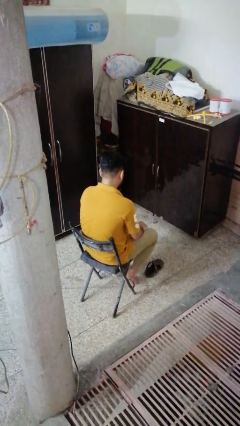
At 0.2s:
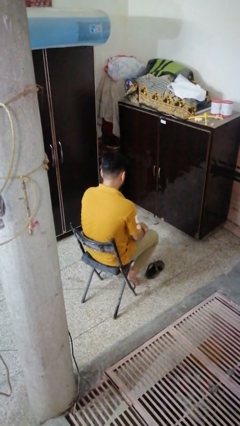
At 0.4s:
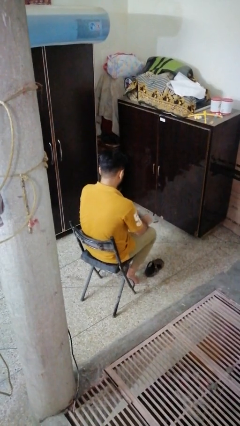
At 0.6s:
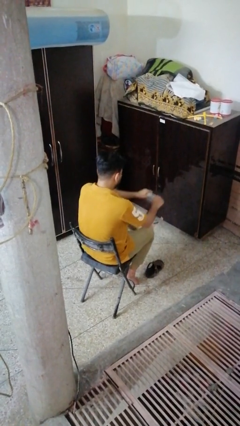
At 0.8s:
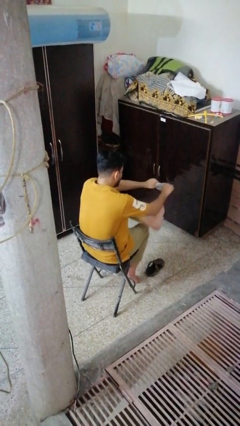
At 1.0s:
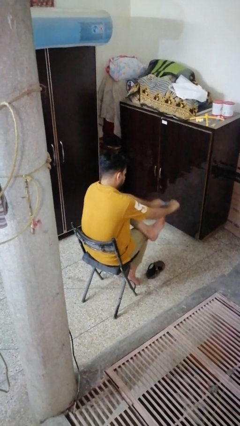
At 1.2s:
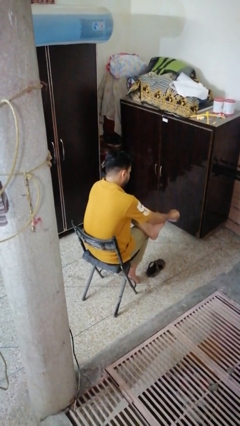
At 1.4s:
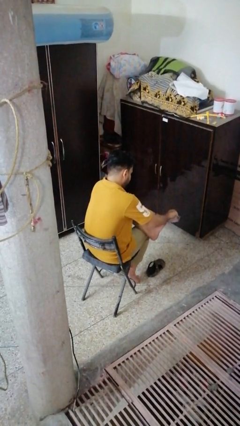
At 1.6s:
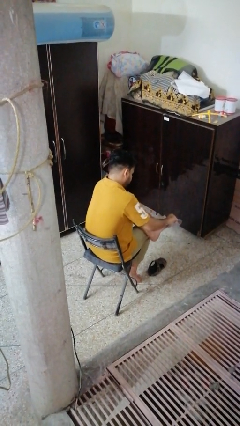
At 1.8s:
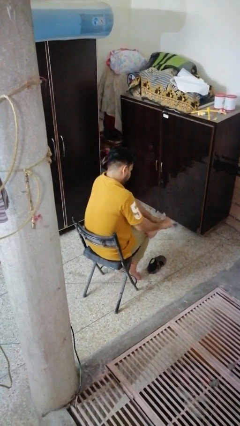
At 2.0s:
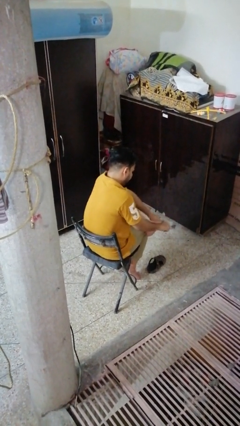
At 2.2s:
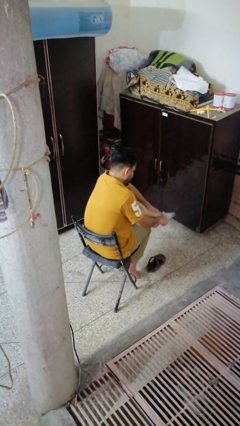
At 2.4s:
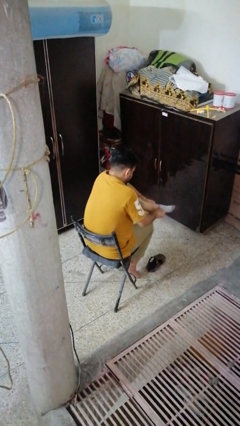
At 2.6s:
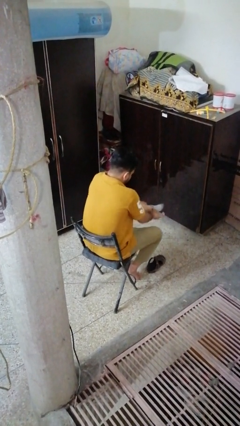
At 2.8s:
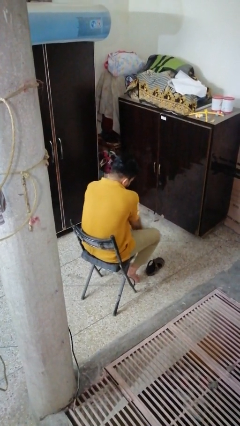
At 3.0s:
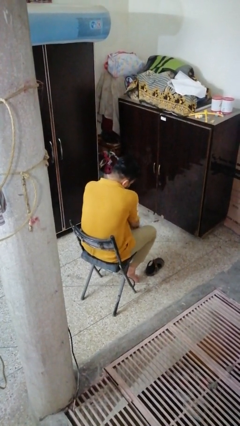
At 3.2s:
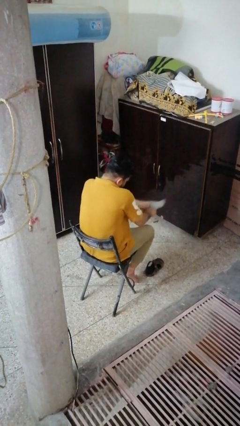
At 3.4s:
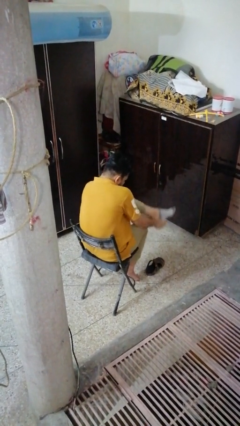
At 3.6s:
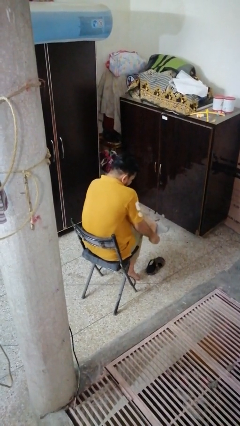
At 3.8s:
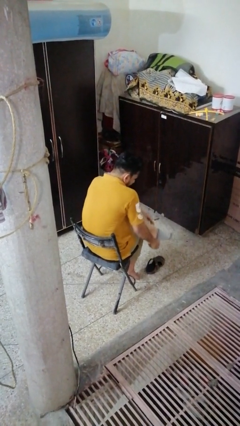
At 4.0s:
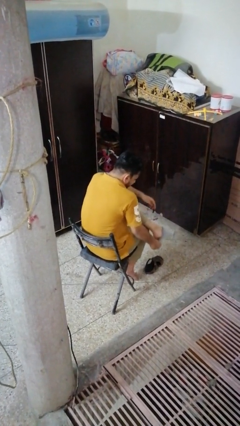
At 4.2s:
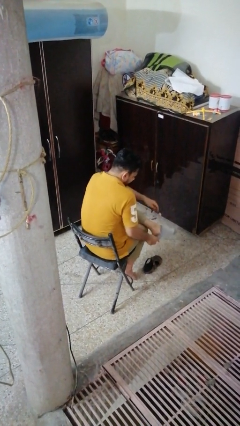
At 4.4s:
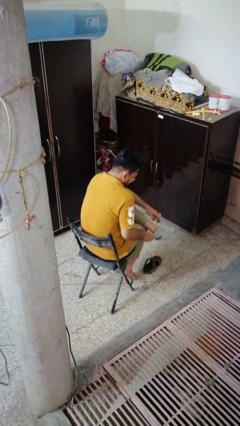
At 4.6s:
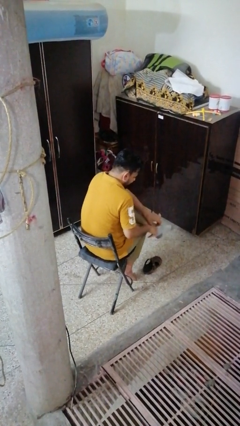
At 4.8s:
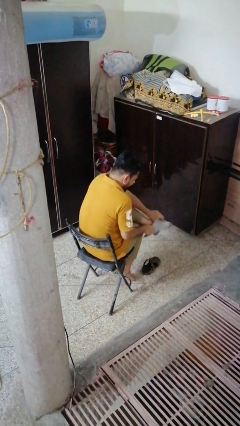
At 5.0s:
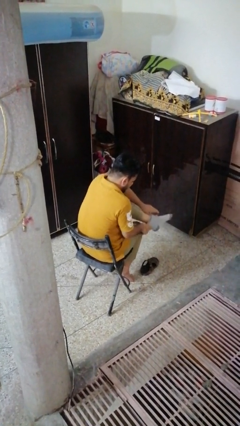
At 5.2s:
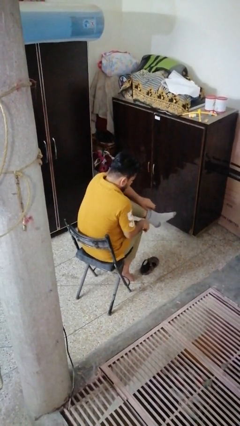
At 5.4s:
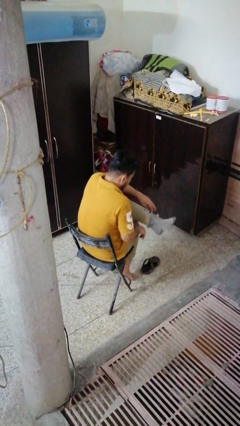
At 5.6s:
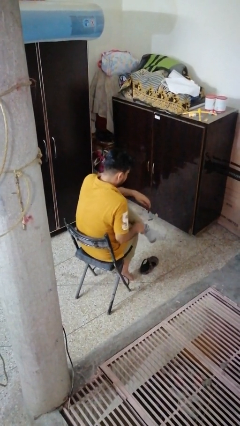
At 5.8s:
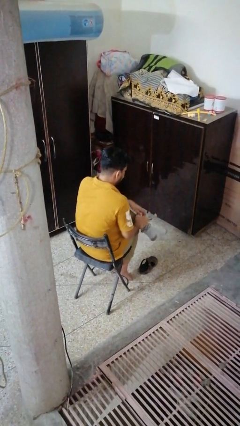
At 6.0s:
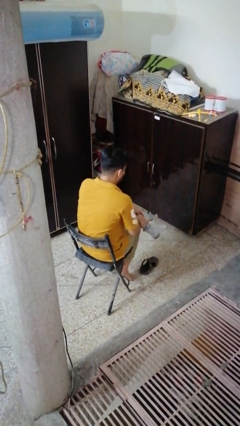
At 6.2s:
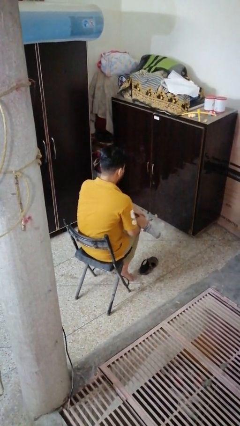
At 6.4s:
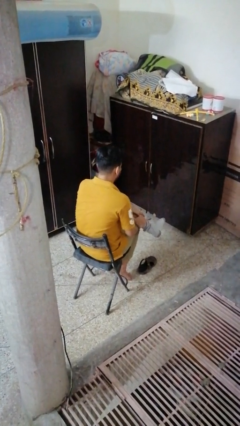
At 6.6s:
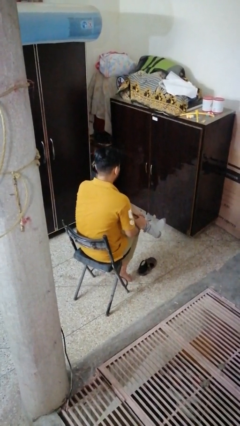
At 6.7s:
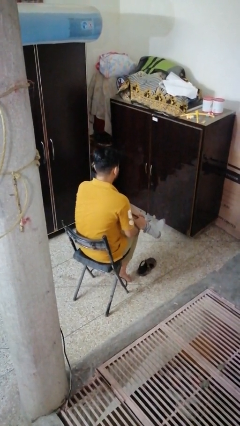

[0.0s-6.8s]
person puts on socks

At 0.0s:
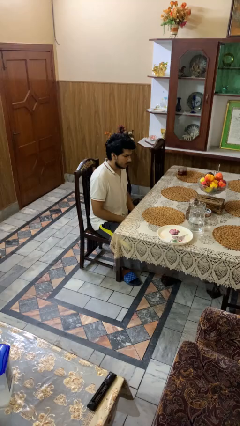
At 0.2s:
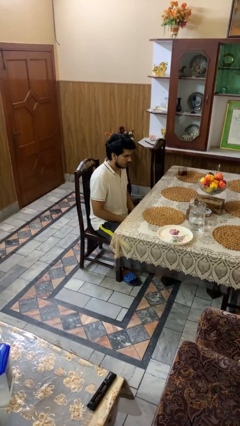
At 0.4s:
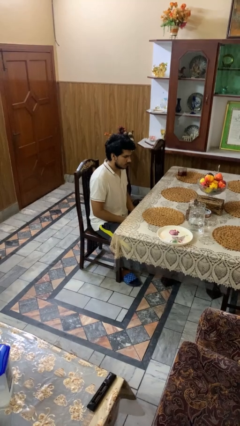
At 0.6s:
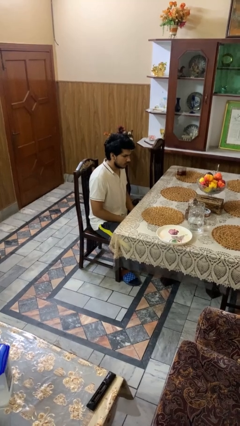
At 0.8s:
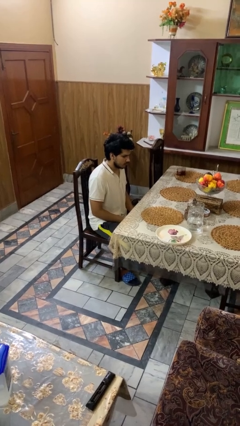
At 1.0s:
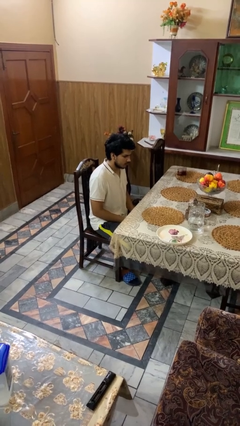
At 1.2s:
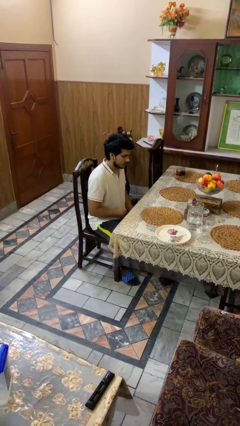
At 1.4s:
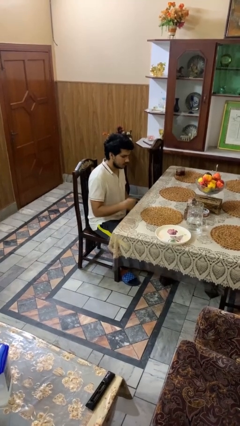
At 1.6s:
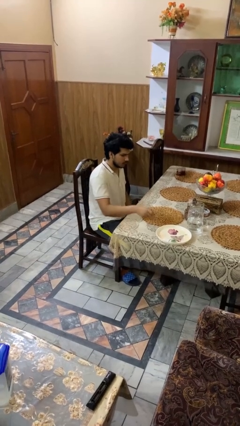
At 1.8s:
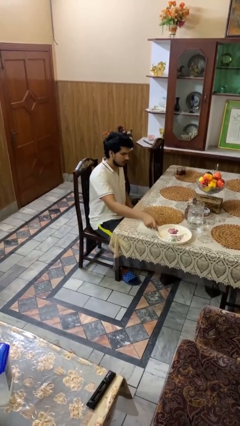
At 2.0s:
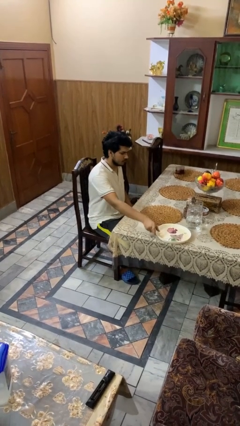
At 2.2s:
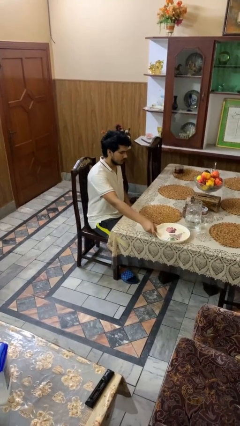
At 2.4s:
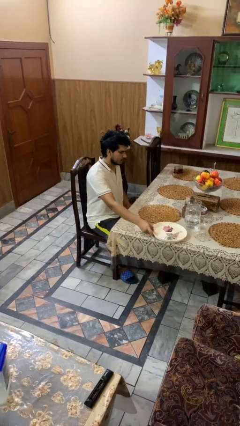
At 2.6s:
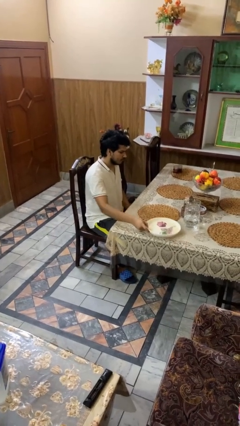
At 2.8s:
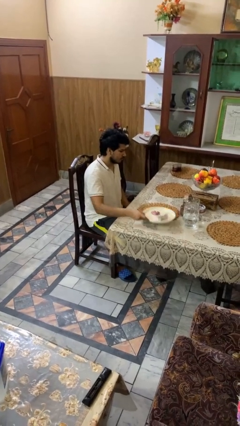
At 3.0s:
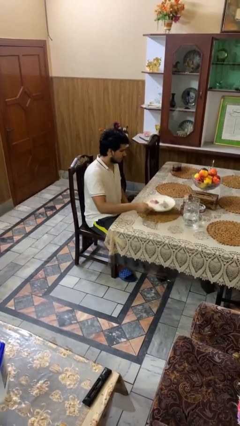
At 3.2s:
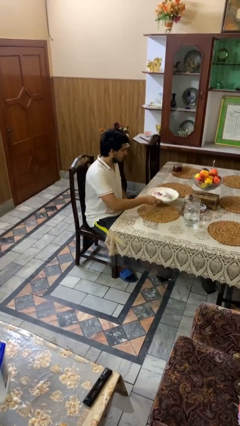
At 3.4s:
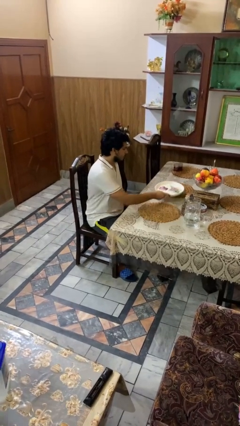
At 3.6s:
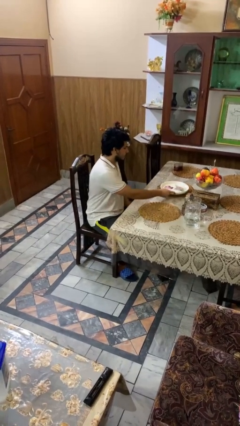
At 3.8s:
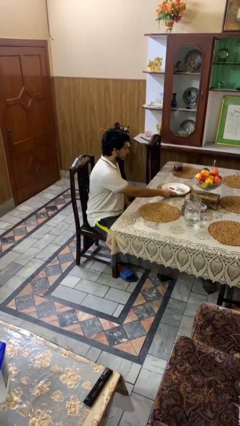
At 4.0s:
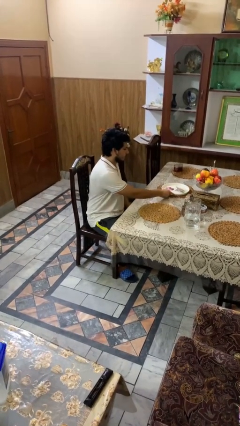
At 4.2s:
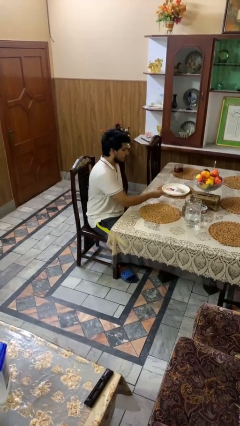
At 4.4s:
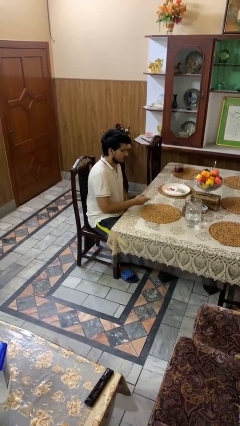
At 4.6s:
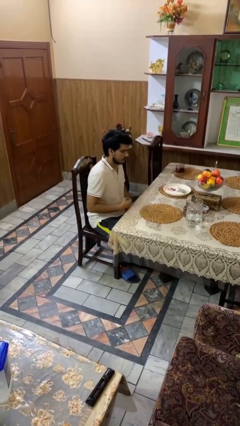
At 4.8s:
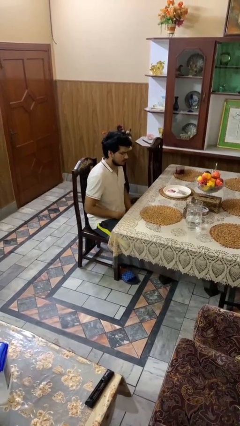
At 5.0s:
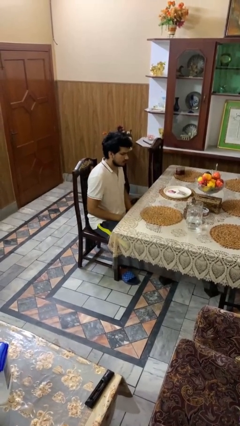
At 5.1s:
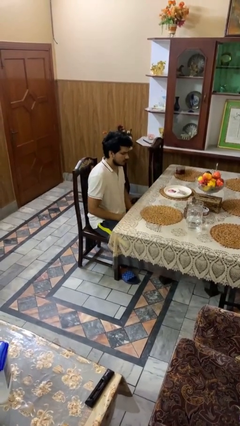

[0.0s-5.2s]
person sets table

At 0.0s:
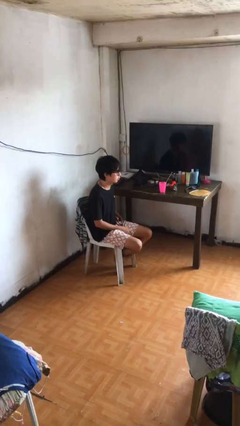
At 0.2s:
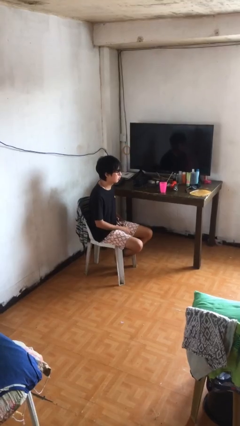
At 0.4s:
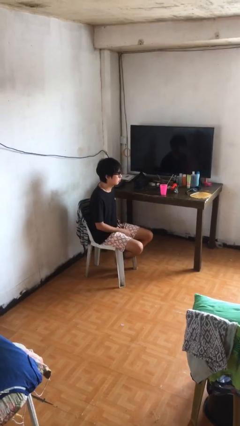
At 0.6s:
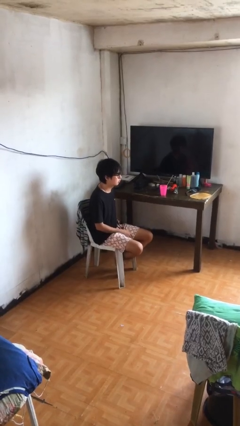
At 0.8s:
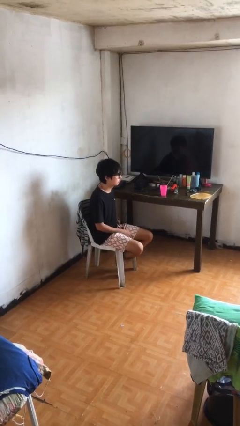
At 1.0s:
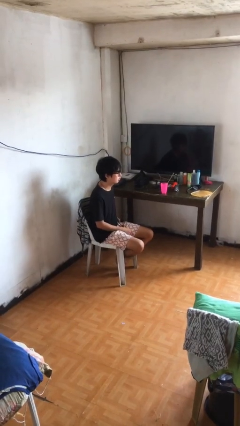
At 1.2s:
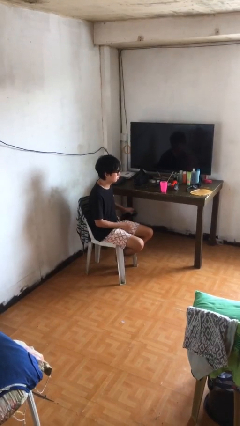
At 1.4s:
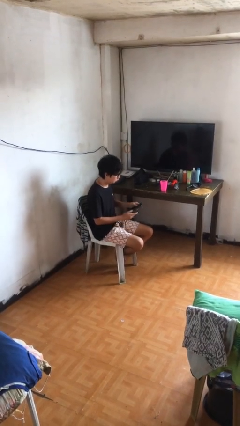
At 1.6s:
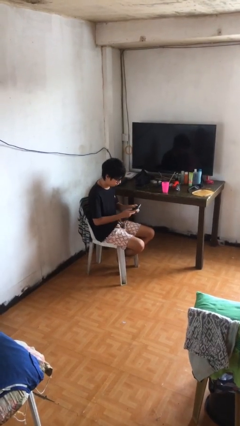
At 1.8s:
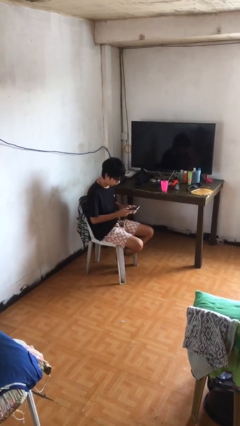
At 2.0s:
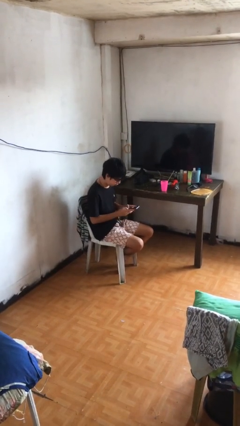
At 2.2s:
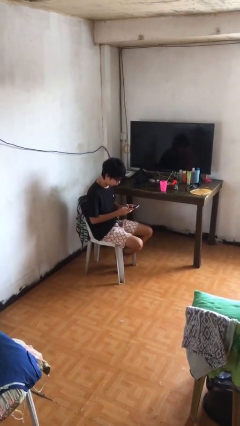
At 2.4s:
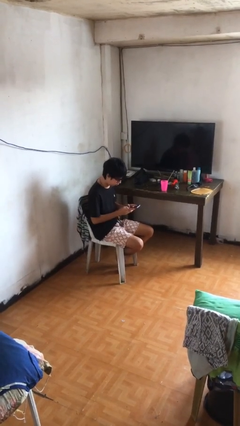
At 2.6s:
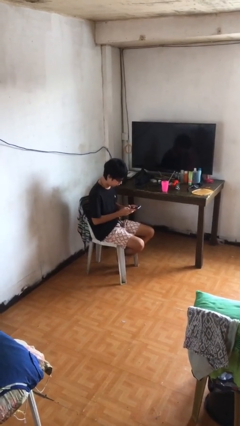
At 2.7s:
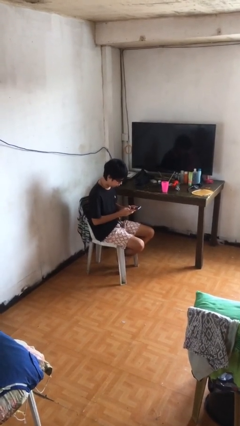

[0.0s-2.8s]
person takes phone from pocket

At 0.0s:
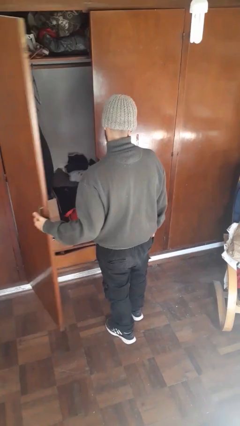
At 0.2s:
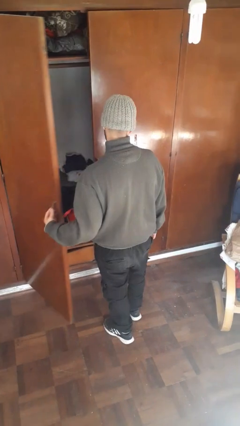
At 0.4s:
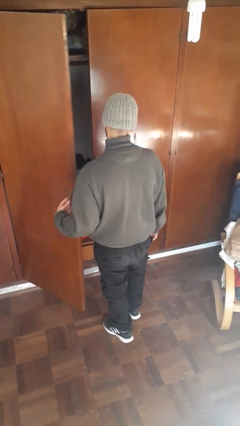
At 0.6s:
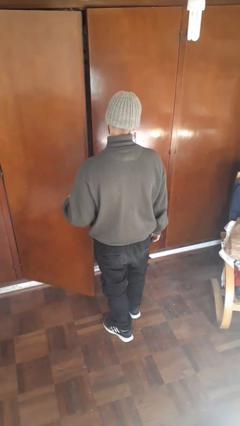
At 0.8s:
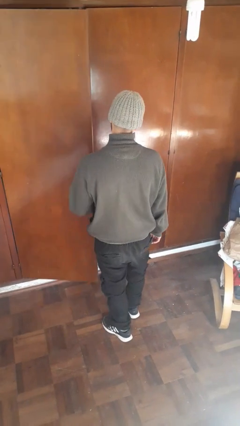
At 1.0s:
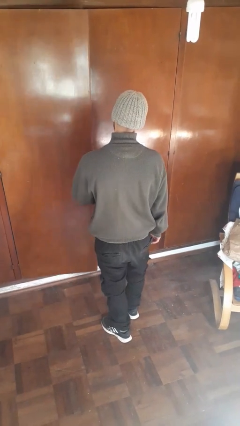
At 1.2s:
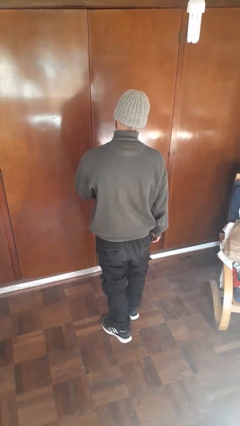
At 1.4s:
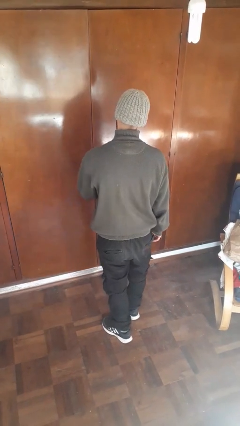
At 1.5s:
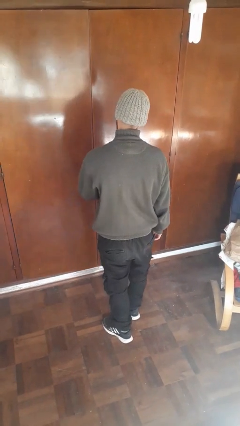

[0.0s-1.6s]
person closes closet door

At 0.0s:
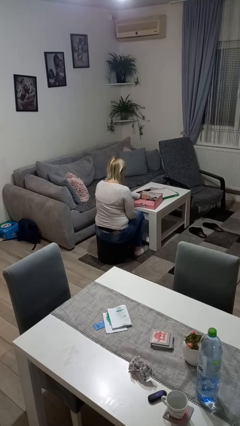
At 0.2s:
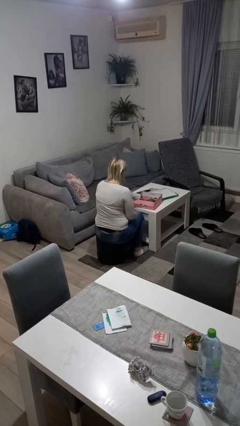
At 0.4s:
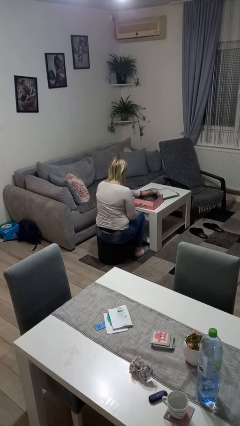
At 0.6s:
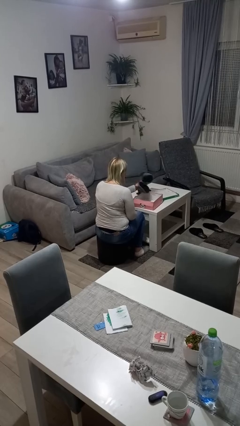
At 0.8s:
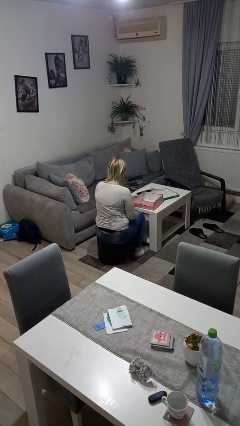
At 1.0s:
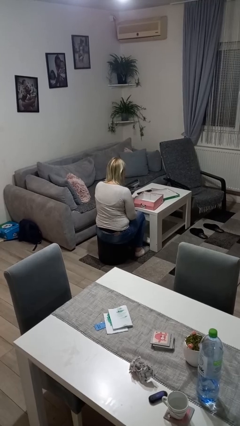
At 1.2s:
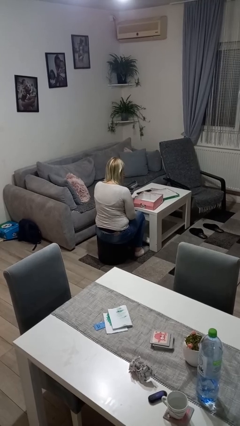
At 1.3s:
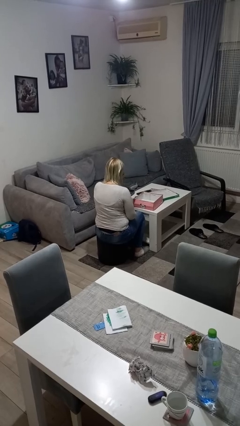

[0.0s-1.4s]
person takes object from box
